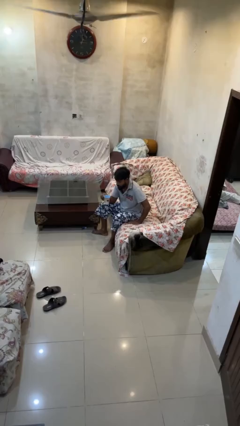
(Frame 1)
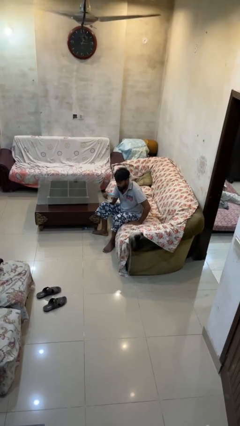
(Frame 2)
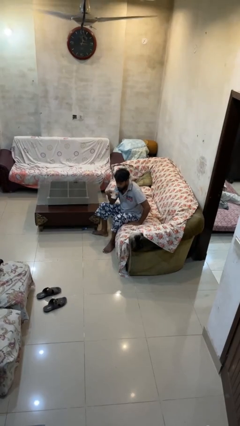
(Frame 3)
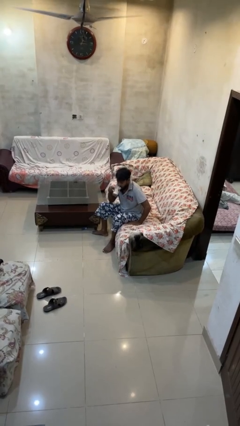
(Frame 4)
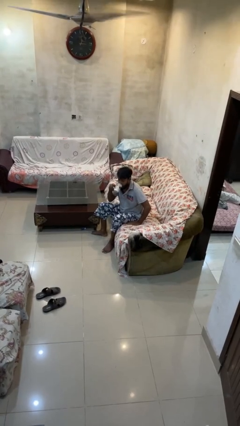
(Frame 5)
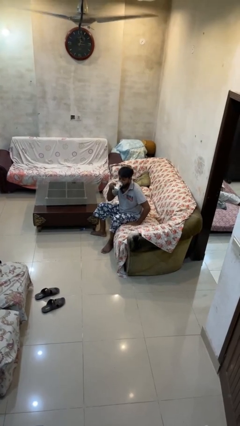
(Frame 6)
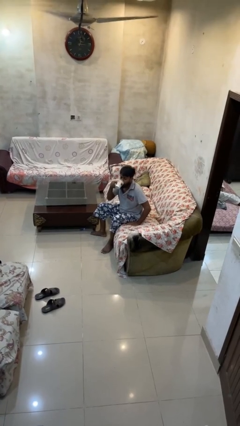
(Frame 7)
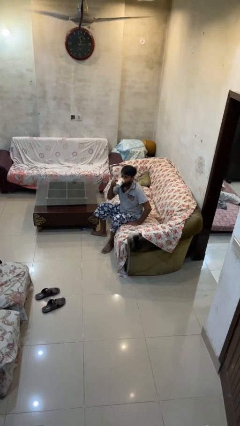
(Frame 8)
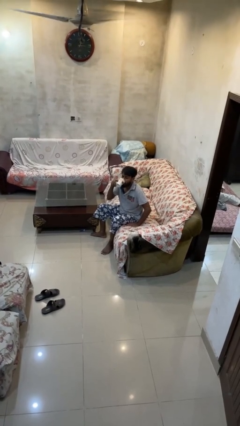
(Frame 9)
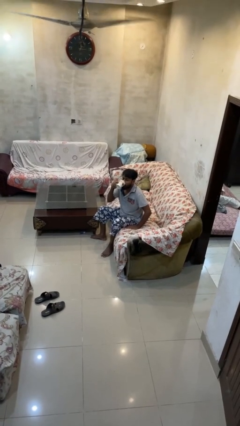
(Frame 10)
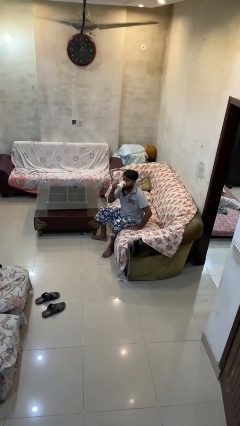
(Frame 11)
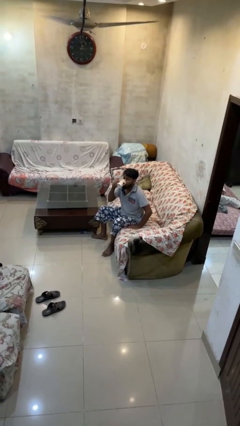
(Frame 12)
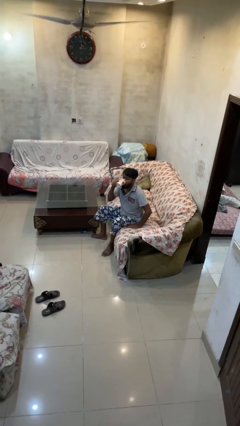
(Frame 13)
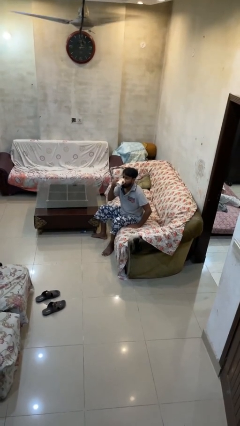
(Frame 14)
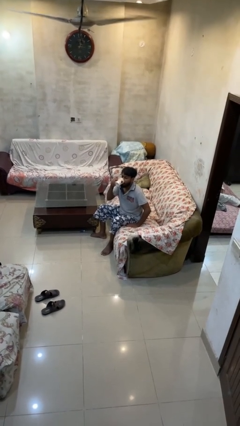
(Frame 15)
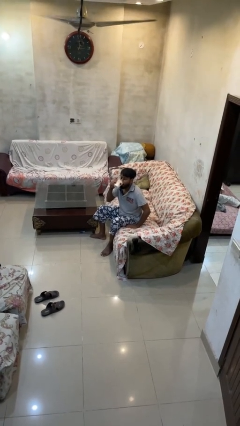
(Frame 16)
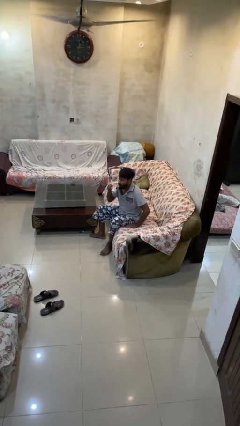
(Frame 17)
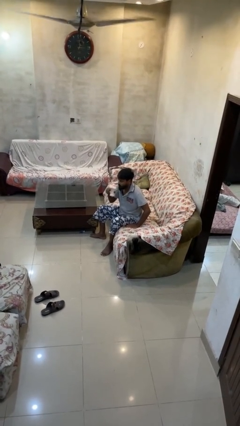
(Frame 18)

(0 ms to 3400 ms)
person drinks from mug

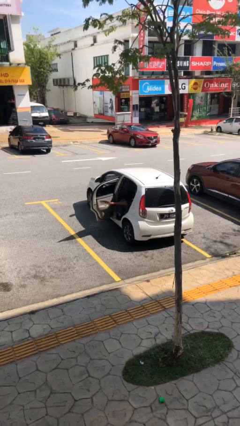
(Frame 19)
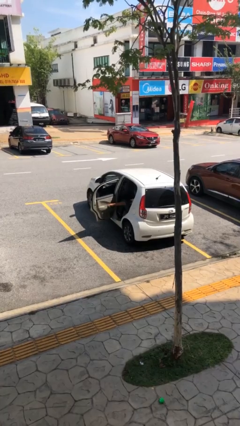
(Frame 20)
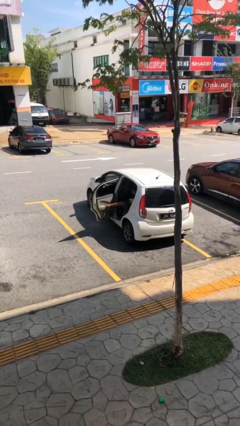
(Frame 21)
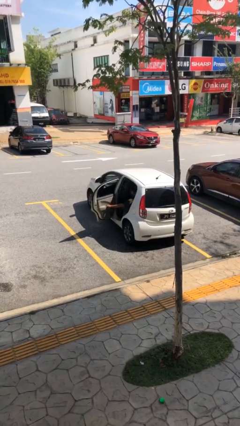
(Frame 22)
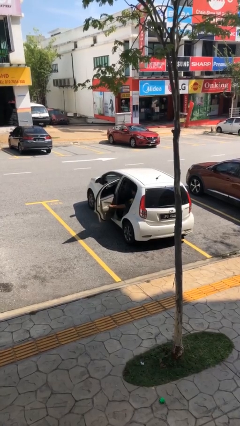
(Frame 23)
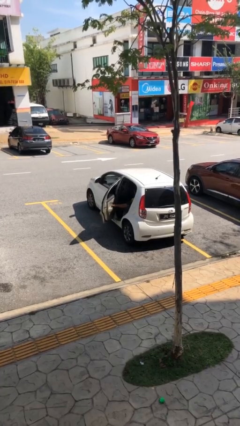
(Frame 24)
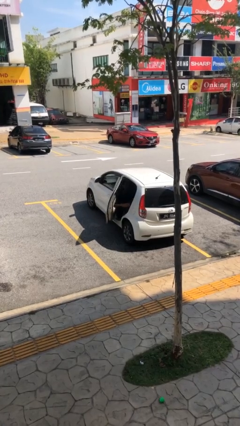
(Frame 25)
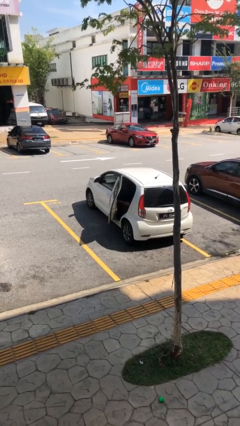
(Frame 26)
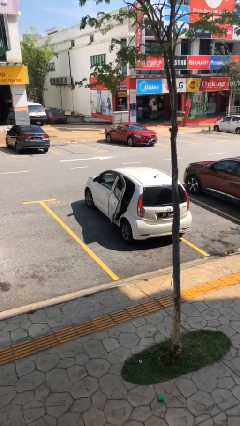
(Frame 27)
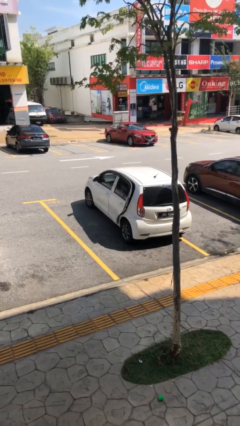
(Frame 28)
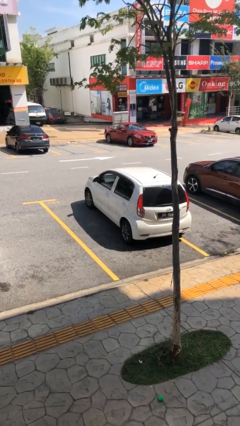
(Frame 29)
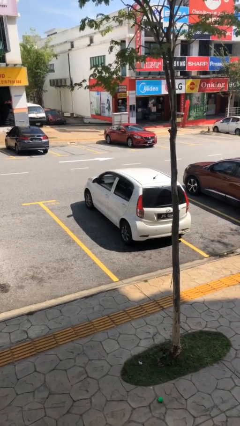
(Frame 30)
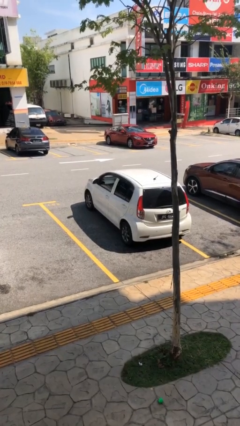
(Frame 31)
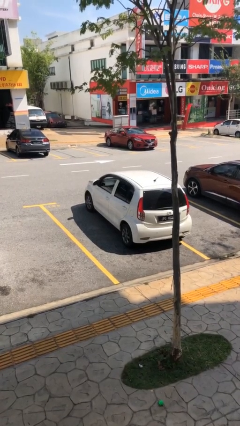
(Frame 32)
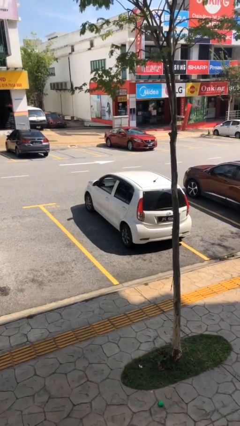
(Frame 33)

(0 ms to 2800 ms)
person closes car door

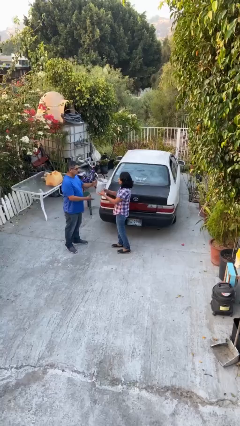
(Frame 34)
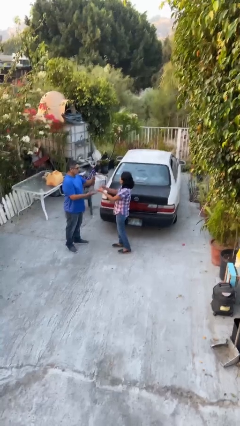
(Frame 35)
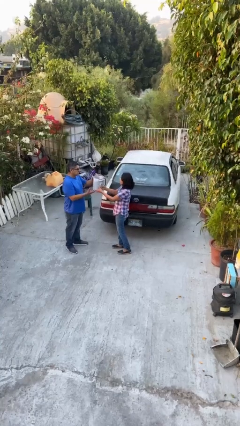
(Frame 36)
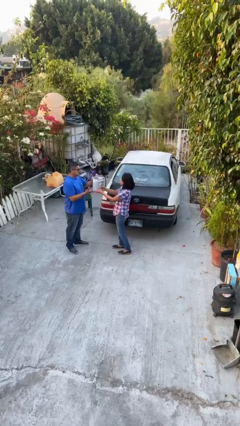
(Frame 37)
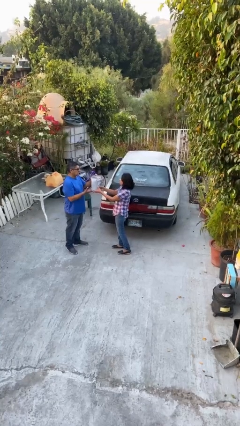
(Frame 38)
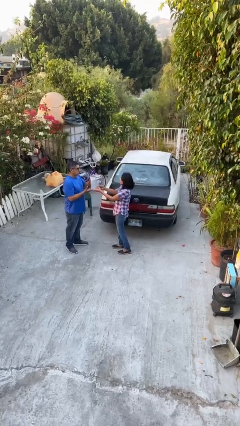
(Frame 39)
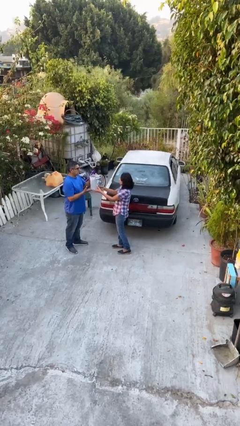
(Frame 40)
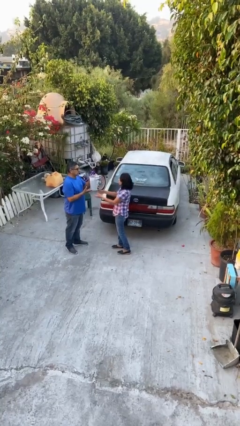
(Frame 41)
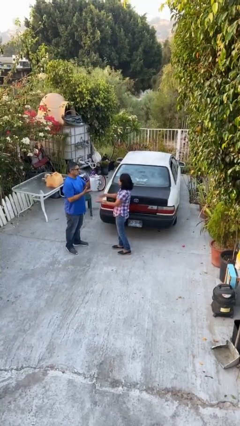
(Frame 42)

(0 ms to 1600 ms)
person transfers object to person

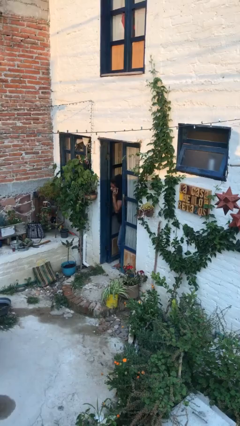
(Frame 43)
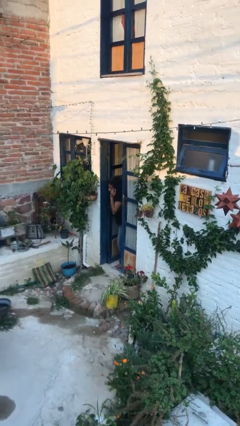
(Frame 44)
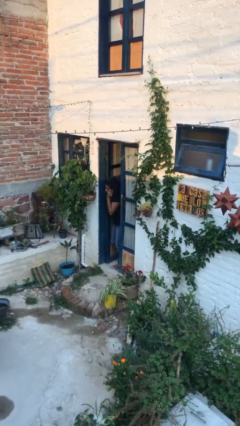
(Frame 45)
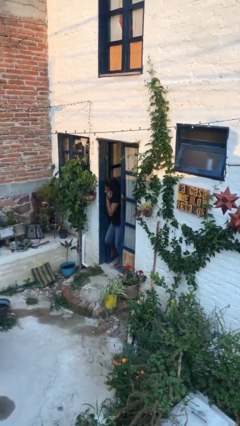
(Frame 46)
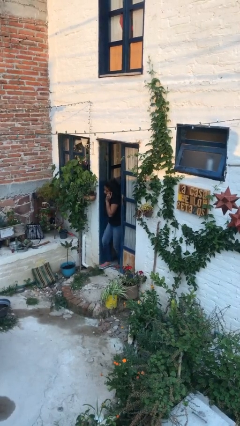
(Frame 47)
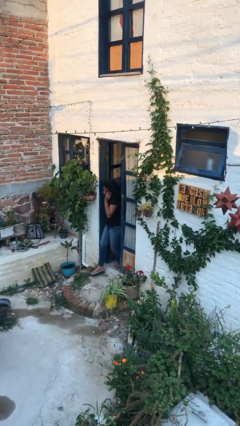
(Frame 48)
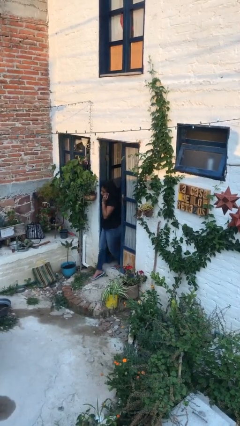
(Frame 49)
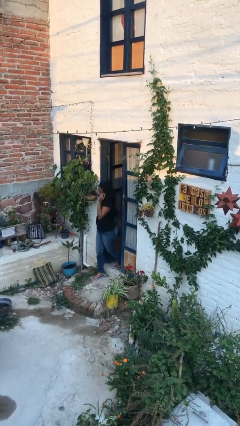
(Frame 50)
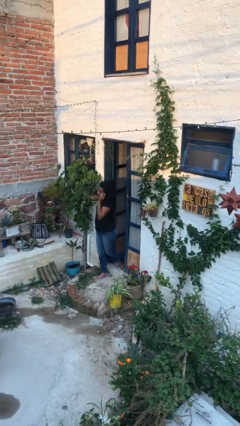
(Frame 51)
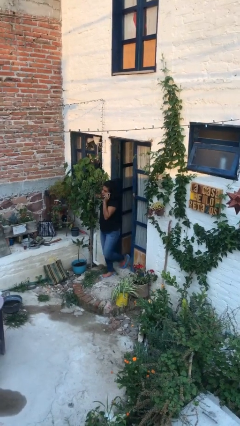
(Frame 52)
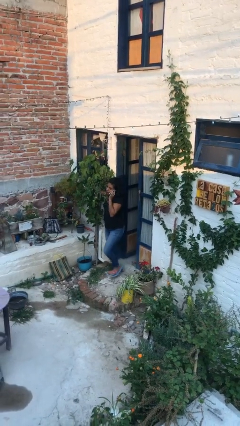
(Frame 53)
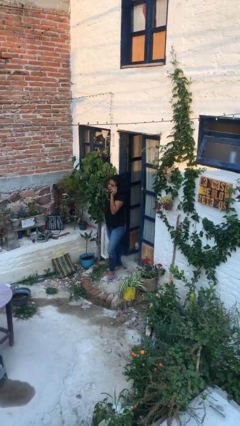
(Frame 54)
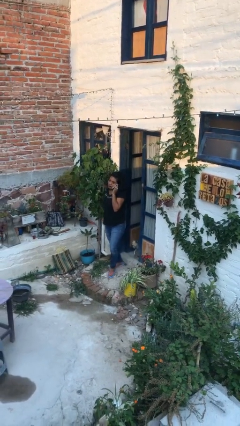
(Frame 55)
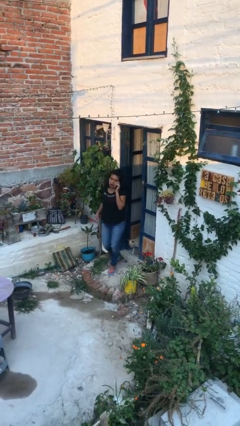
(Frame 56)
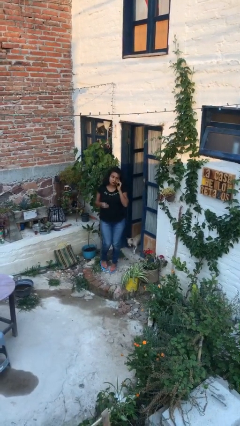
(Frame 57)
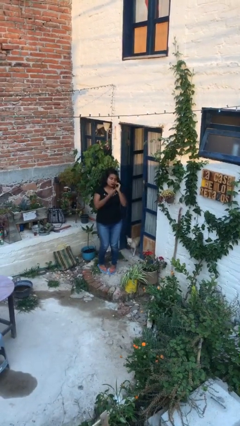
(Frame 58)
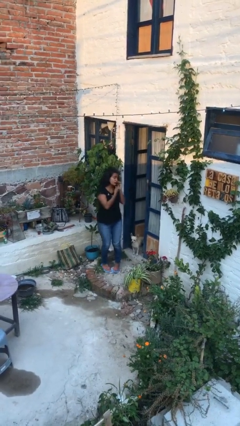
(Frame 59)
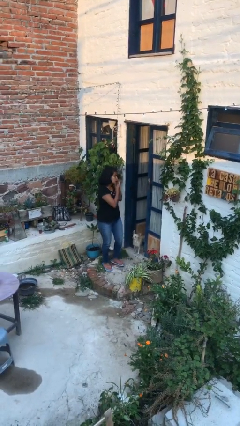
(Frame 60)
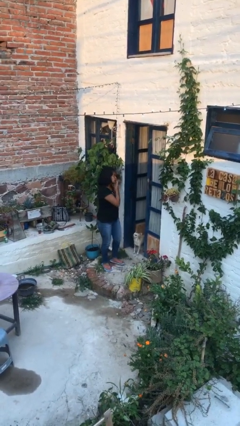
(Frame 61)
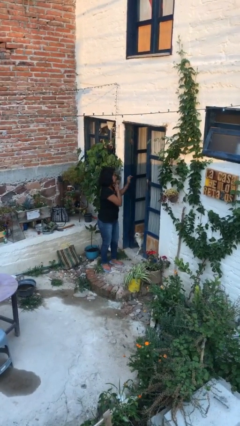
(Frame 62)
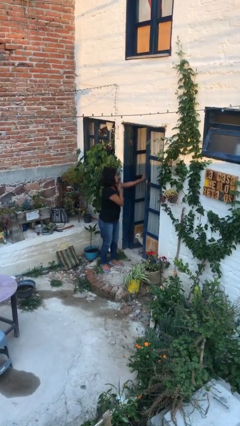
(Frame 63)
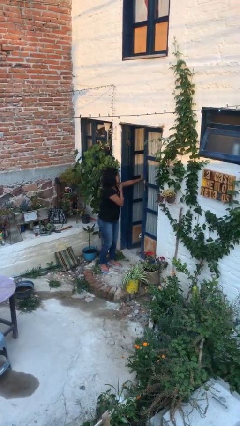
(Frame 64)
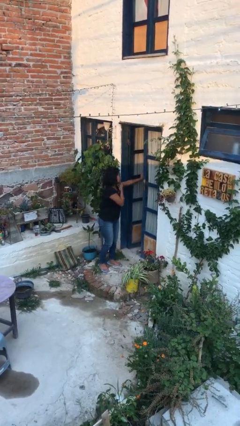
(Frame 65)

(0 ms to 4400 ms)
person enters scene through structure

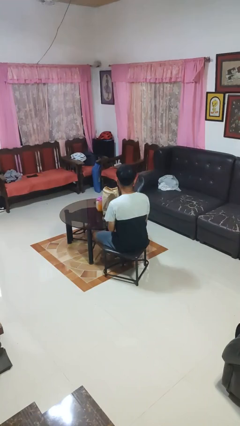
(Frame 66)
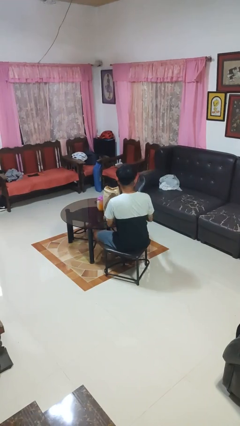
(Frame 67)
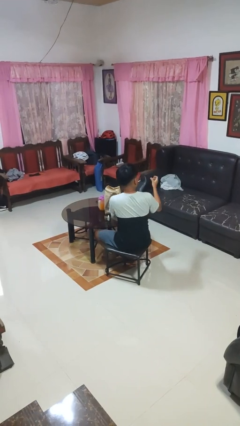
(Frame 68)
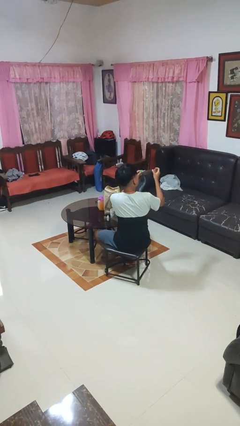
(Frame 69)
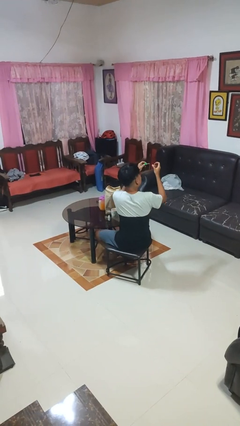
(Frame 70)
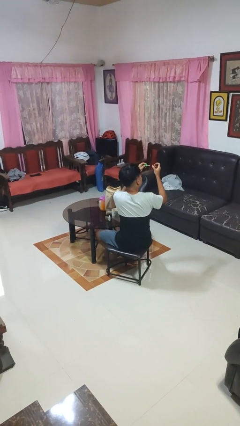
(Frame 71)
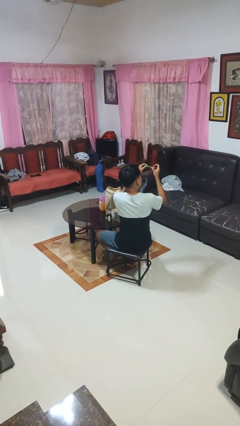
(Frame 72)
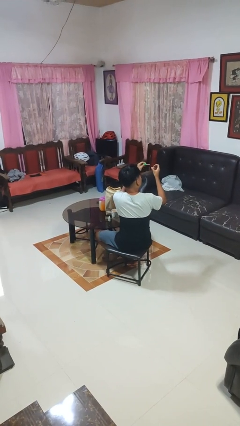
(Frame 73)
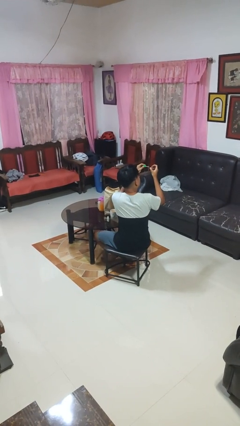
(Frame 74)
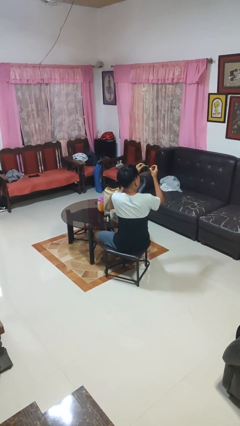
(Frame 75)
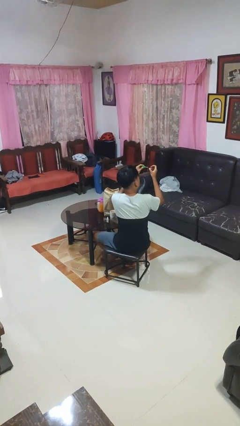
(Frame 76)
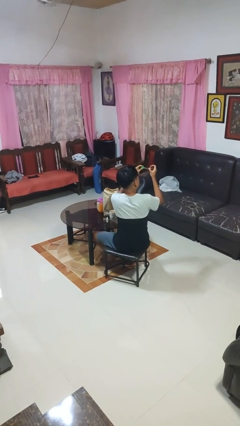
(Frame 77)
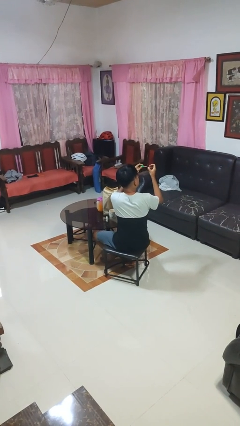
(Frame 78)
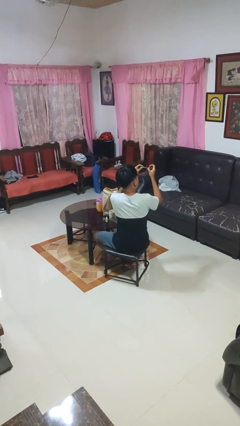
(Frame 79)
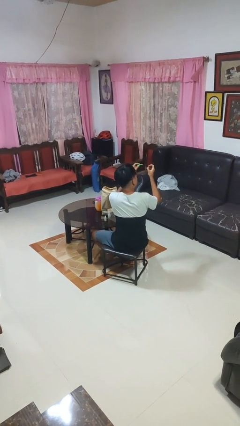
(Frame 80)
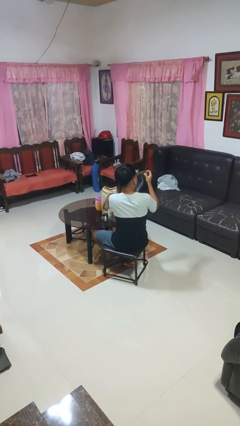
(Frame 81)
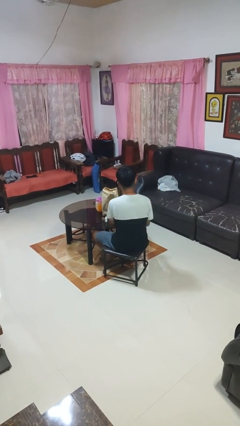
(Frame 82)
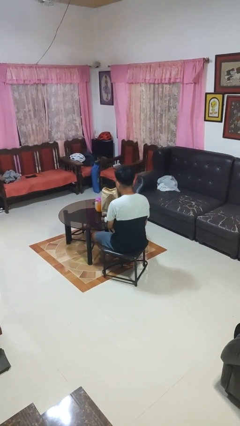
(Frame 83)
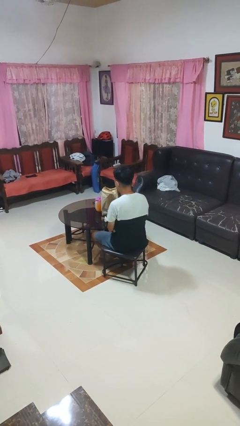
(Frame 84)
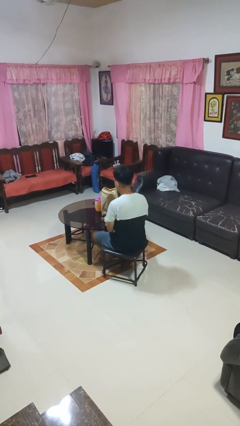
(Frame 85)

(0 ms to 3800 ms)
person paints fingernails

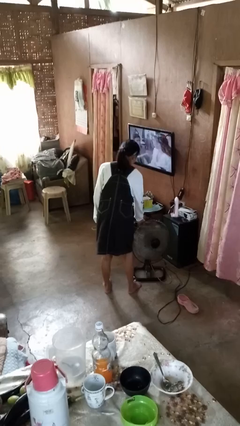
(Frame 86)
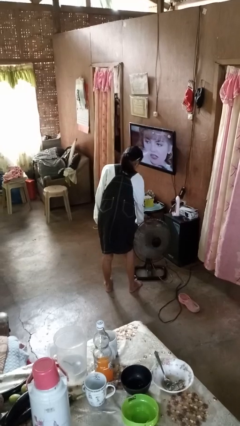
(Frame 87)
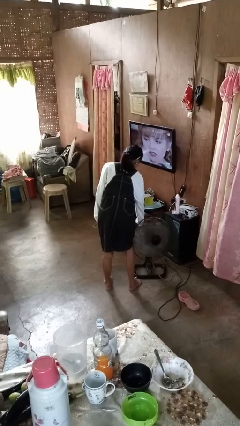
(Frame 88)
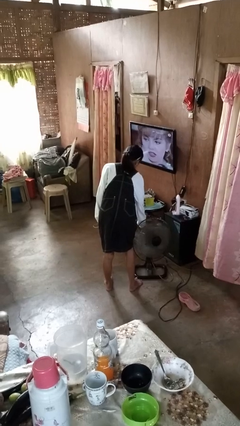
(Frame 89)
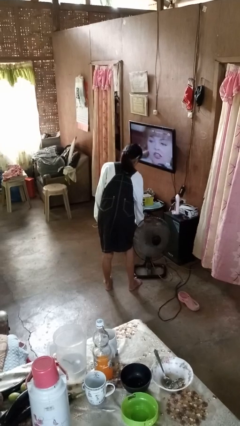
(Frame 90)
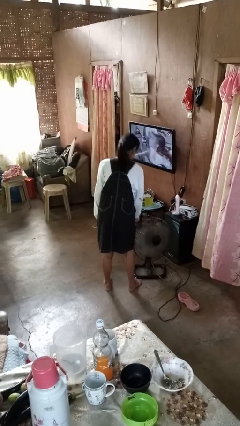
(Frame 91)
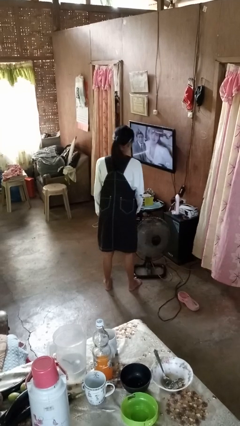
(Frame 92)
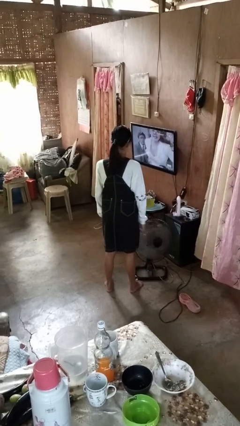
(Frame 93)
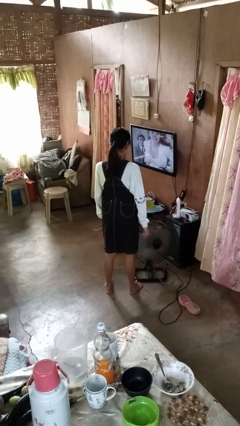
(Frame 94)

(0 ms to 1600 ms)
person turns off fan
